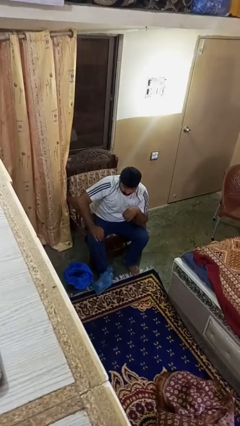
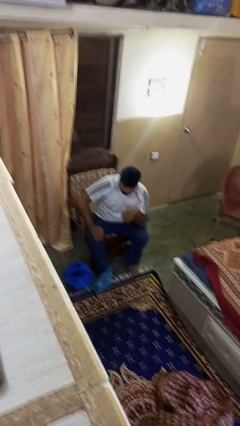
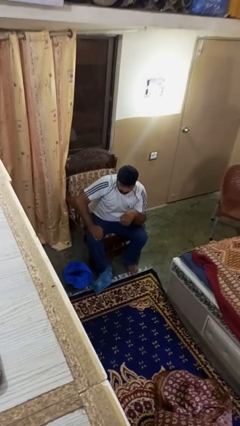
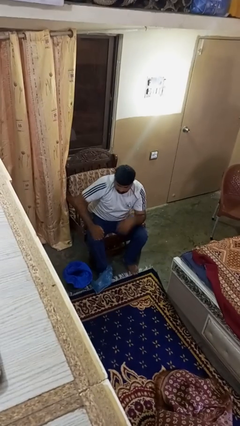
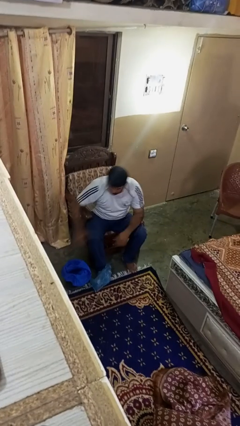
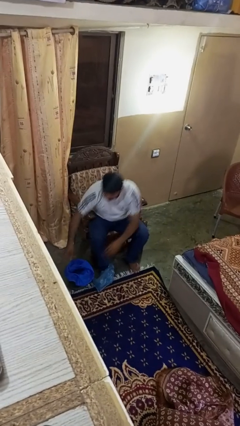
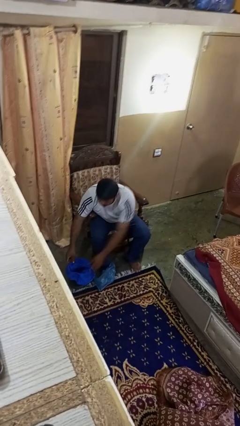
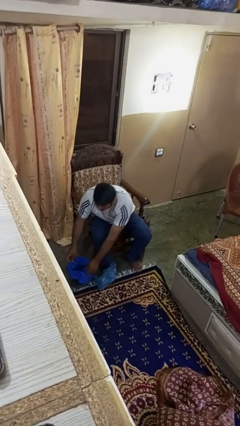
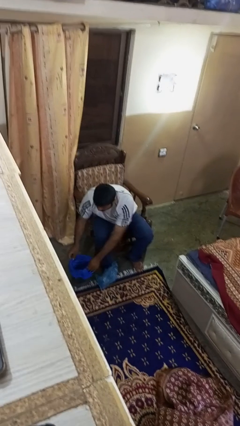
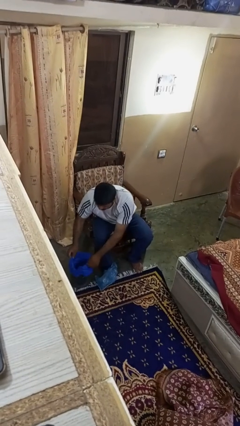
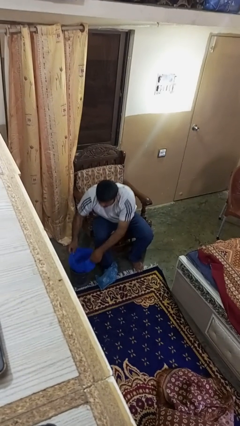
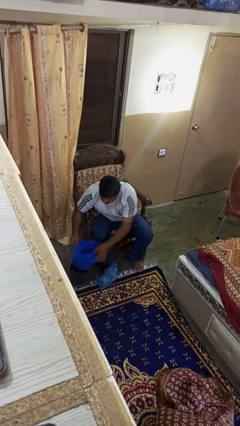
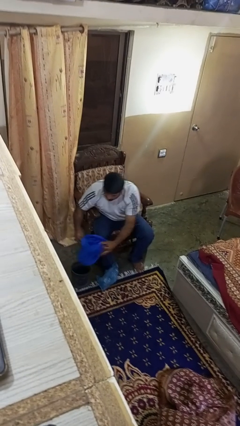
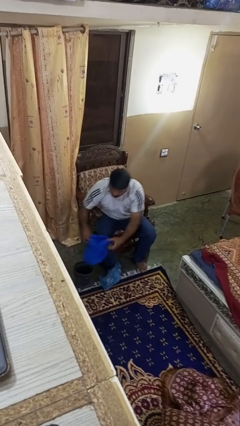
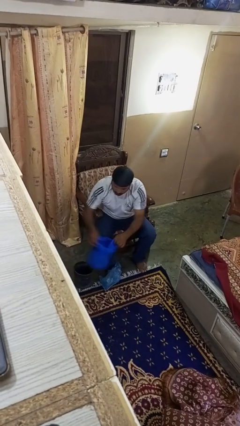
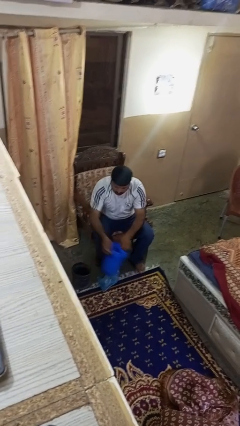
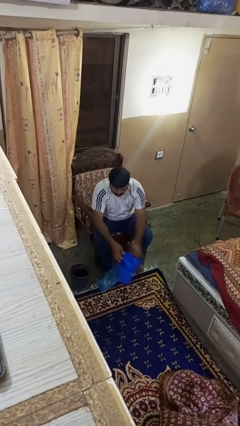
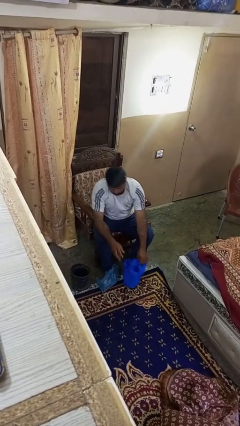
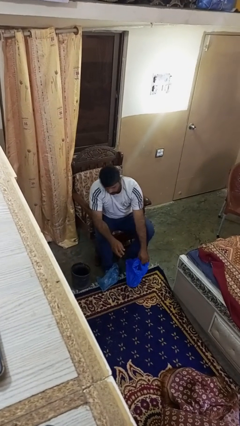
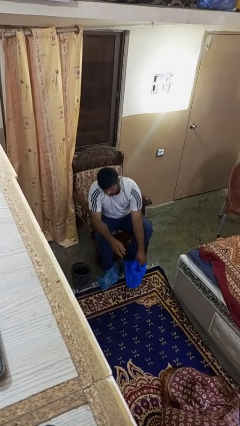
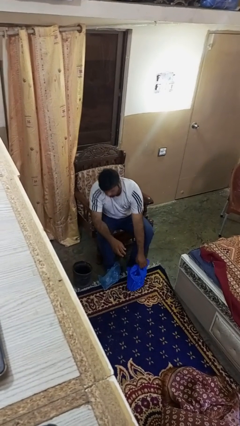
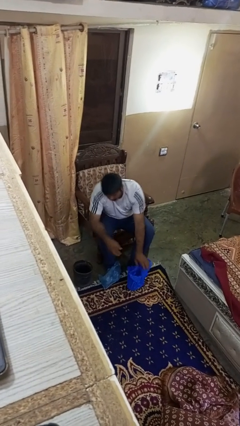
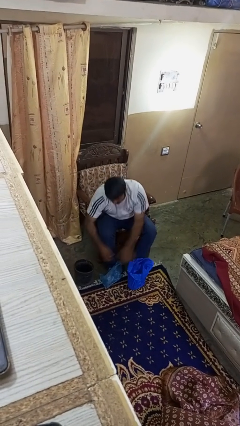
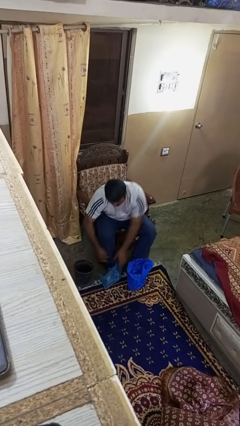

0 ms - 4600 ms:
person removes trashbag from trashcan

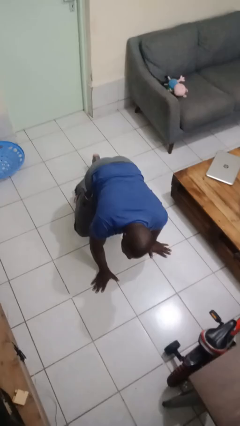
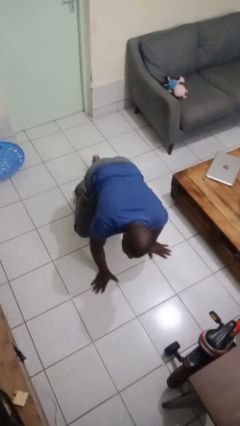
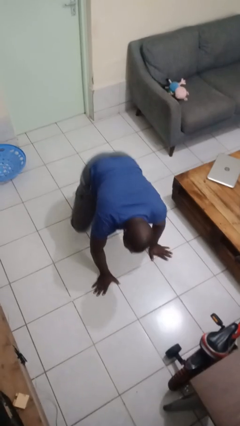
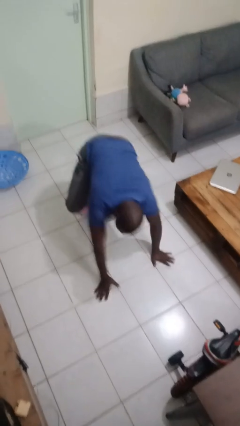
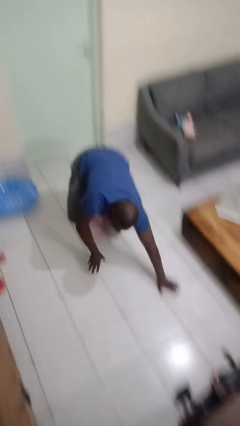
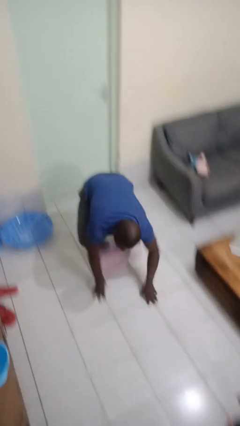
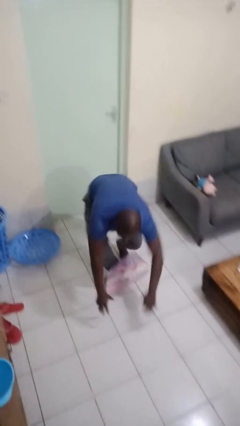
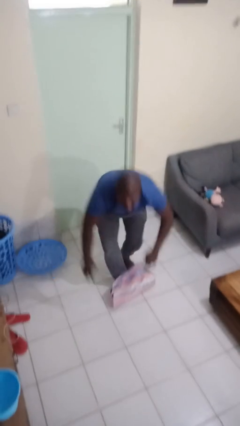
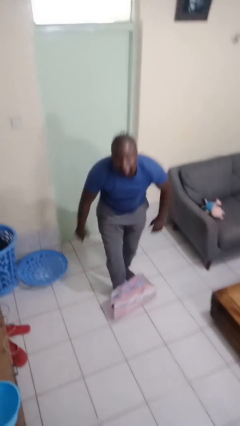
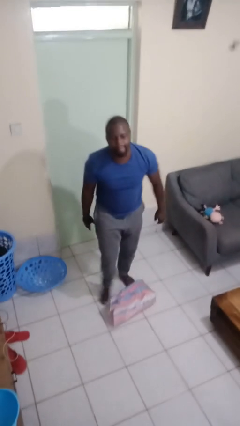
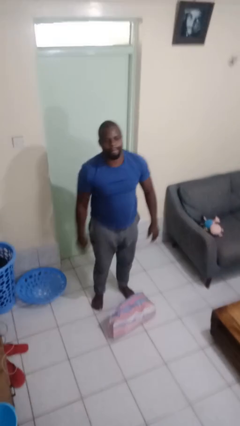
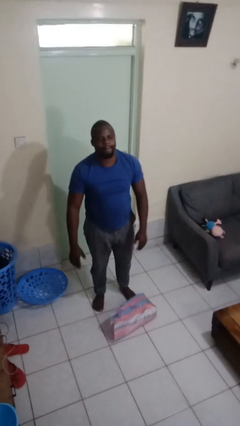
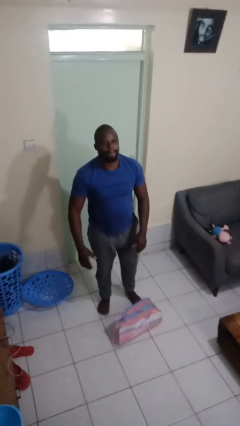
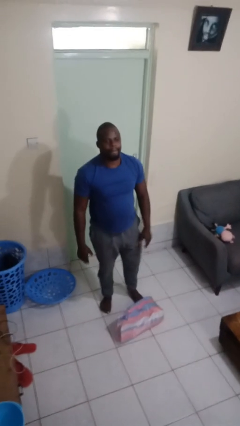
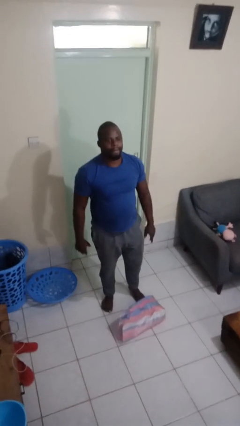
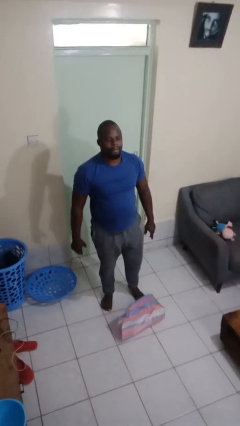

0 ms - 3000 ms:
person stands up from floor

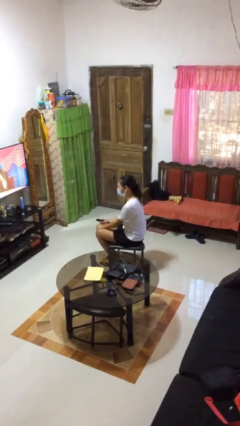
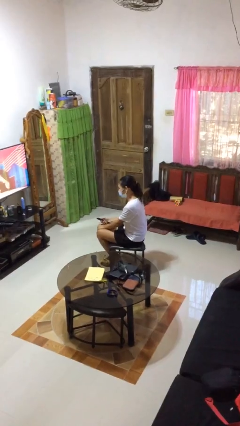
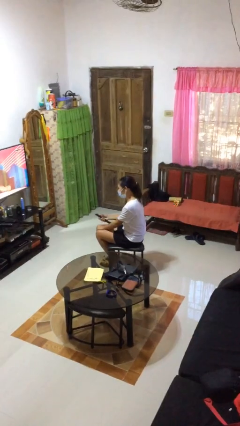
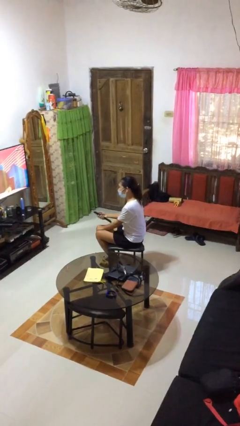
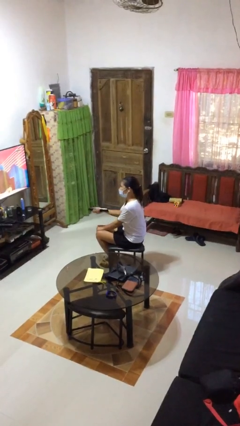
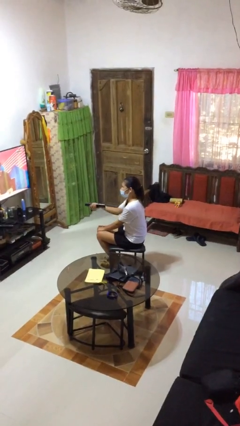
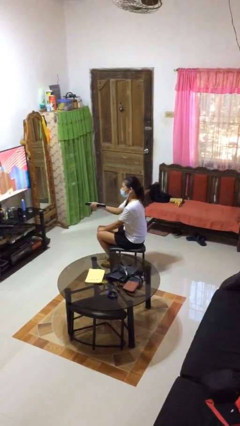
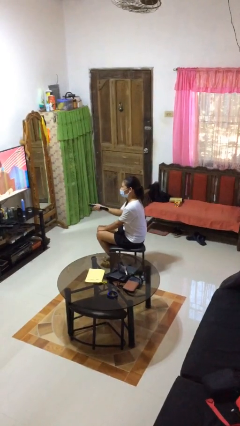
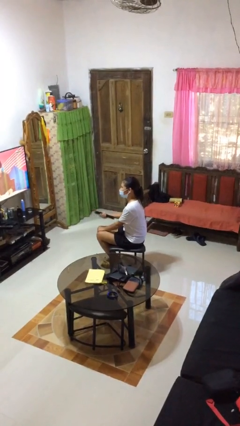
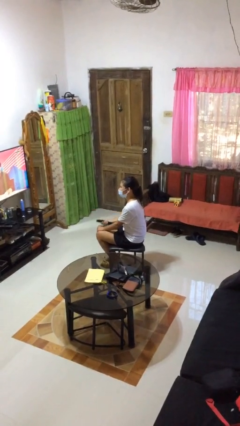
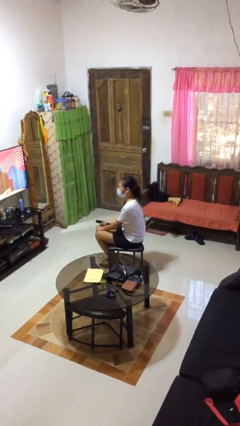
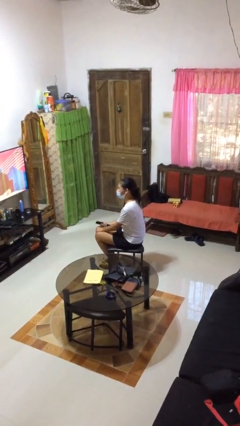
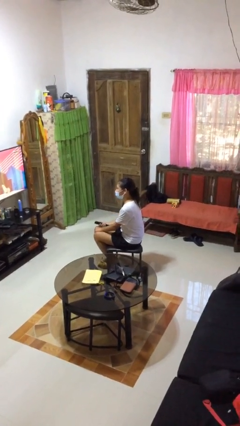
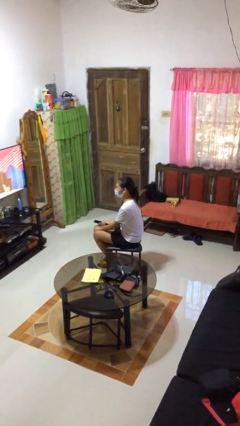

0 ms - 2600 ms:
person uses television remote

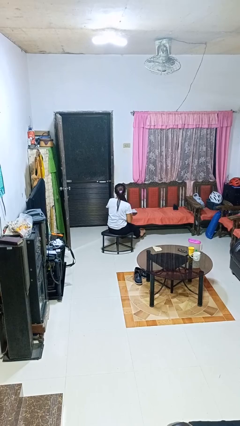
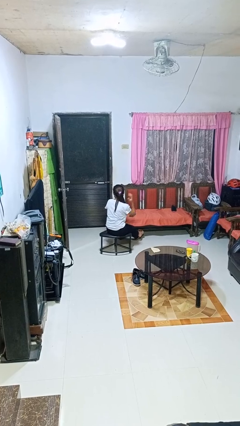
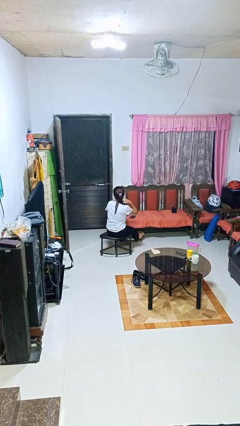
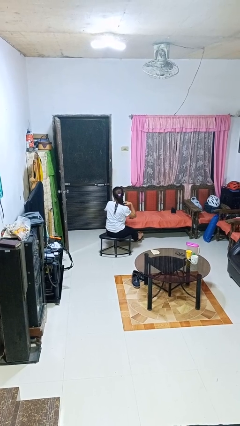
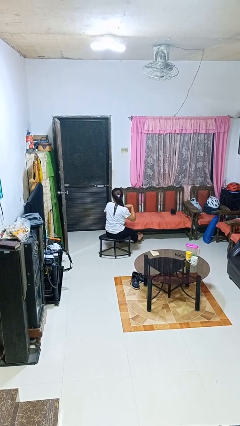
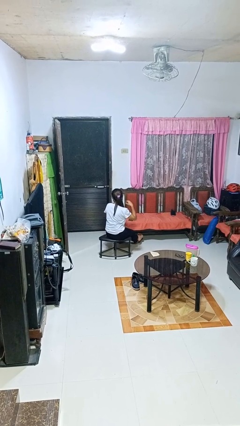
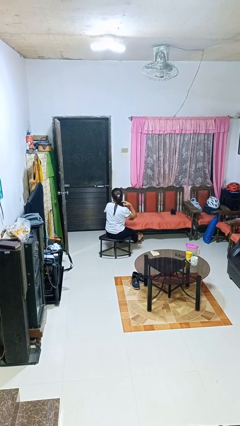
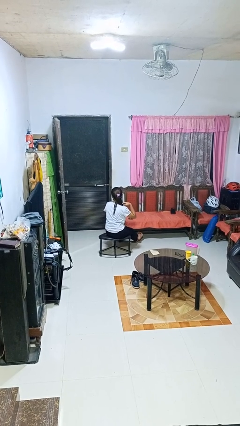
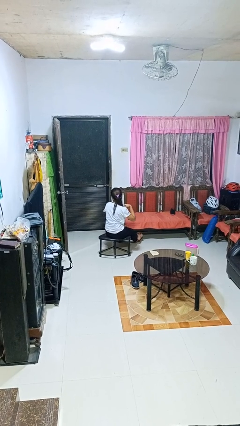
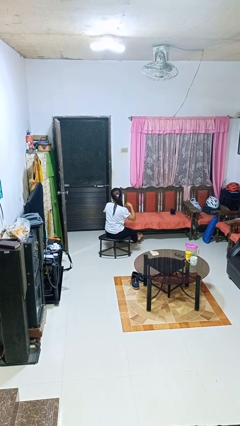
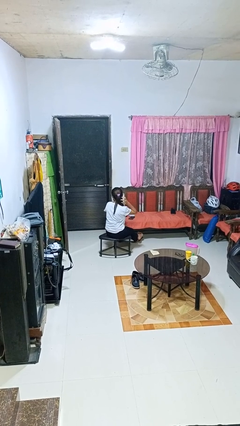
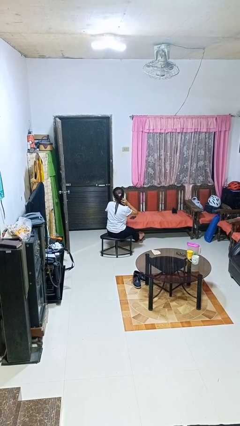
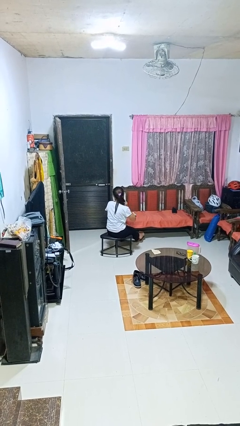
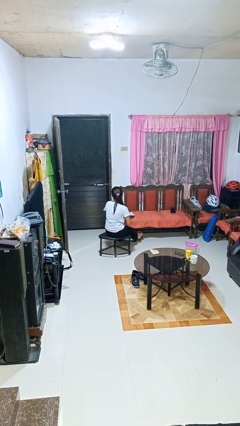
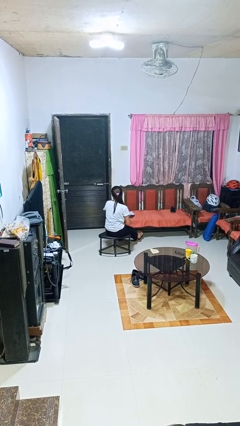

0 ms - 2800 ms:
person strokes hair

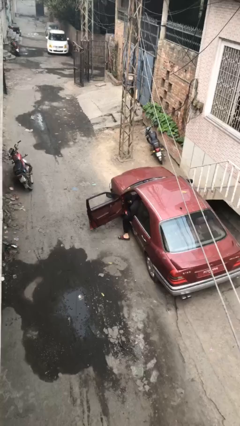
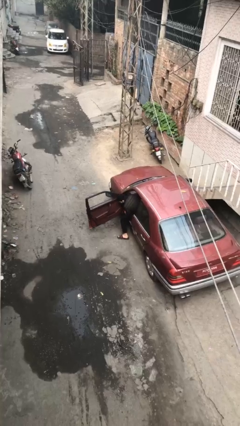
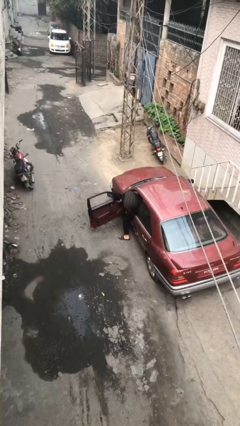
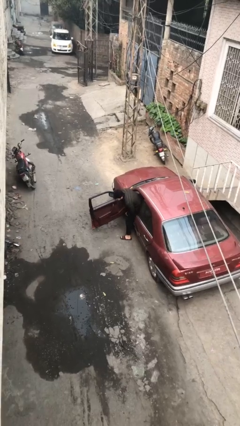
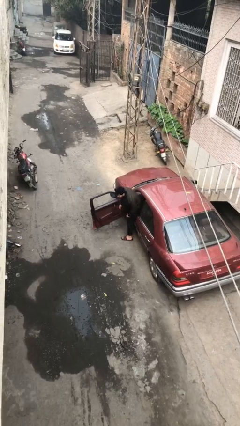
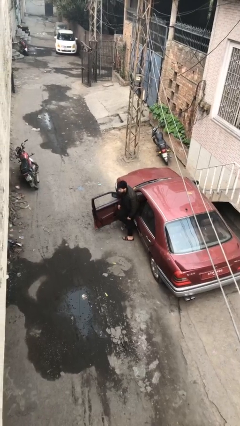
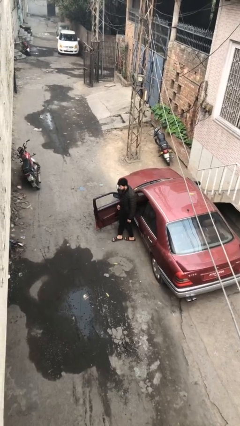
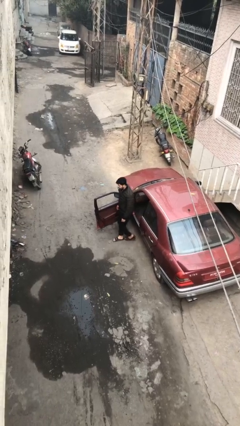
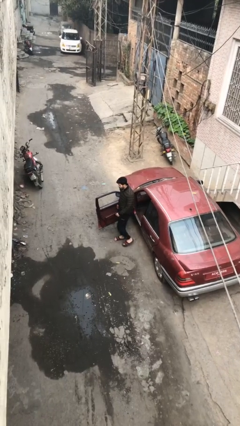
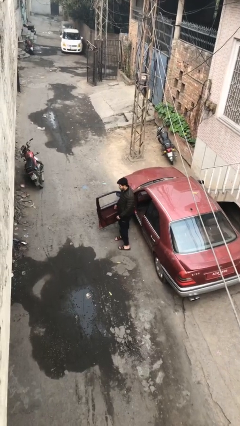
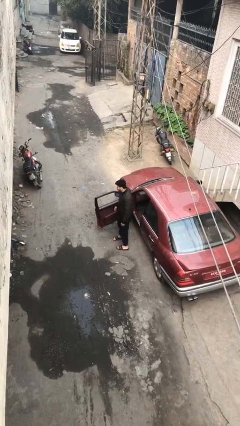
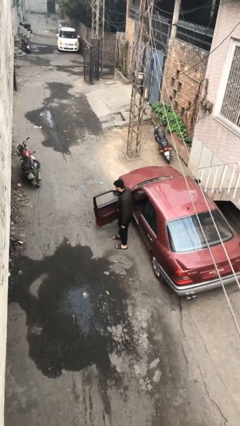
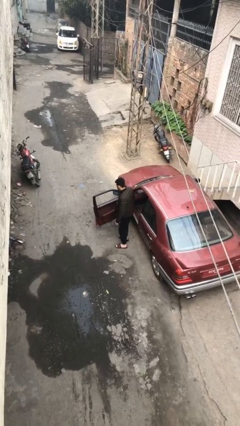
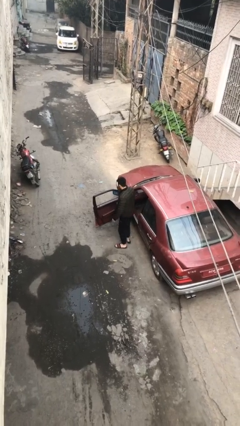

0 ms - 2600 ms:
person exits car

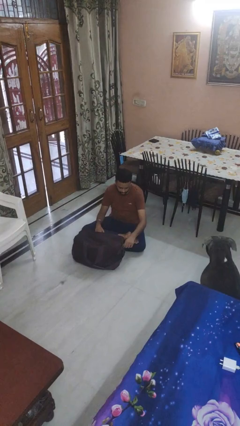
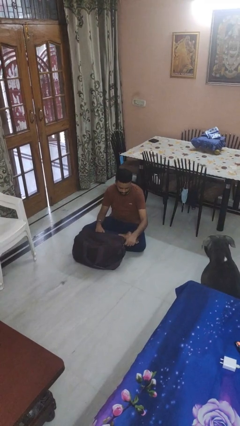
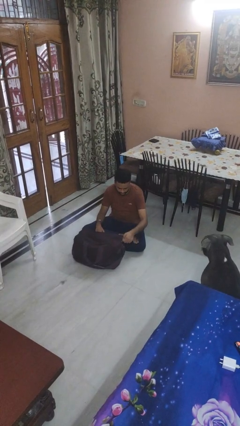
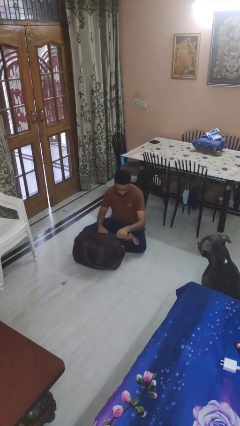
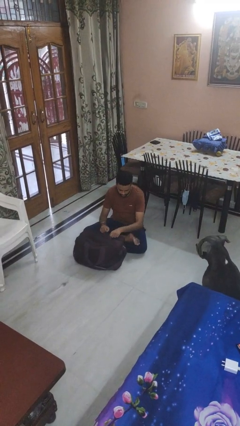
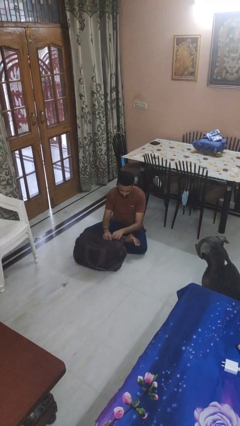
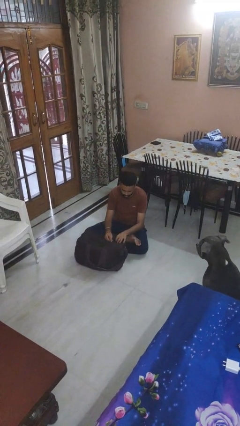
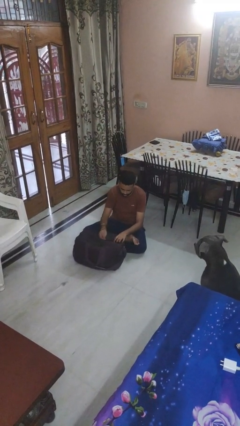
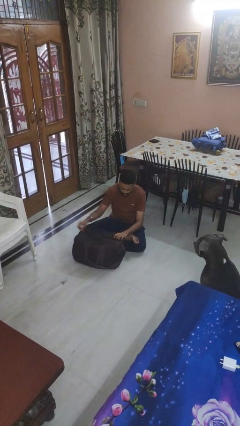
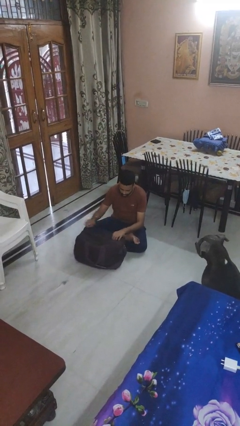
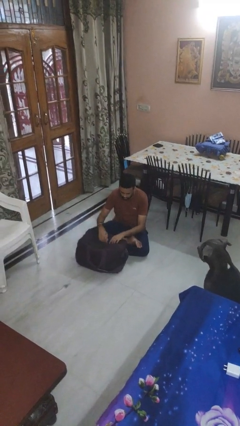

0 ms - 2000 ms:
person opens suitcase
